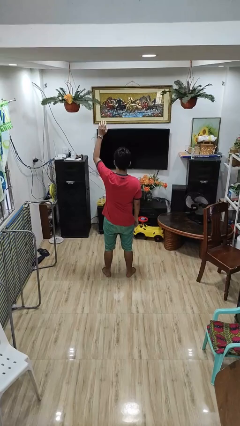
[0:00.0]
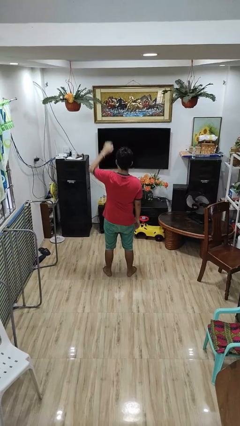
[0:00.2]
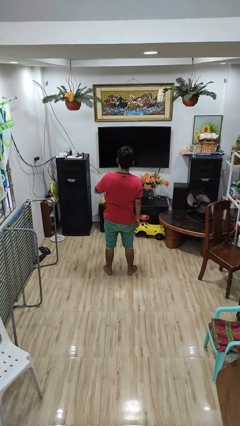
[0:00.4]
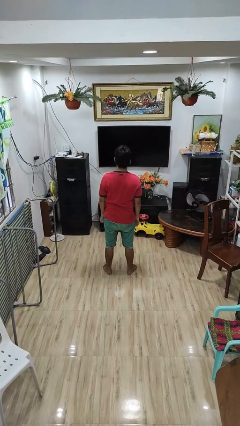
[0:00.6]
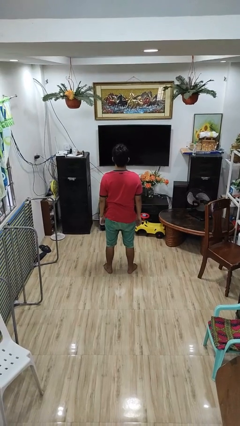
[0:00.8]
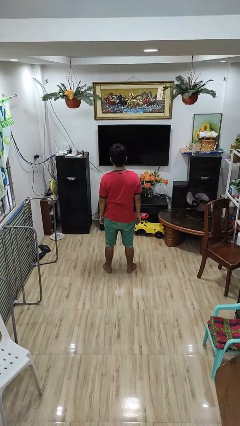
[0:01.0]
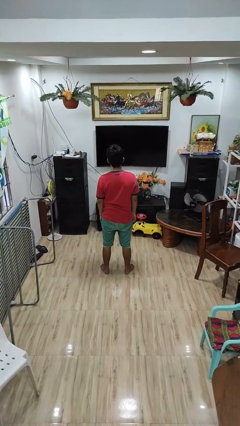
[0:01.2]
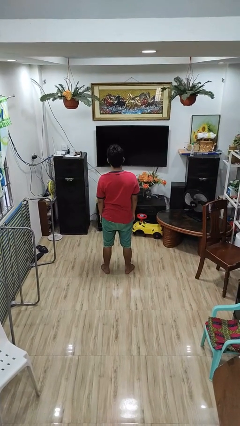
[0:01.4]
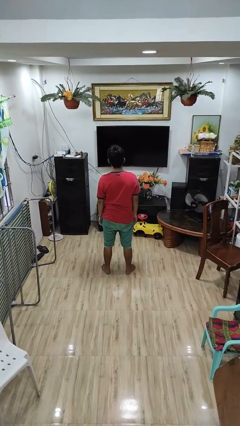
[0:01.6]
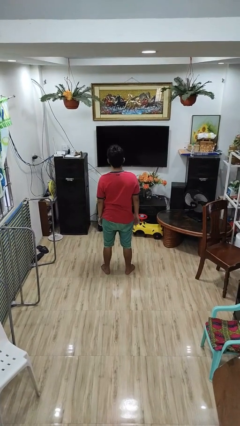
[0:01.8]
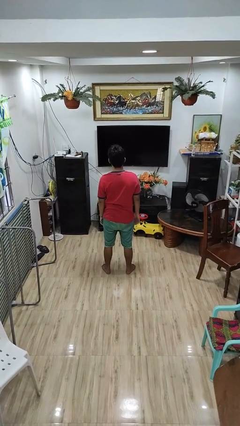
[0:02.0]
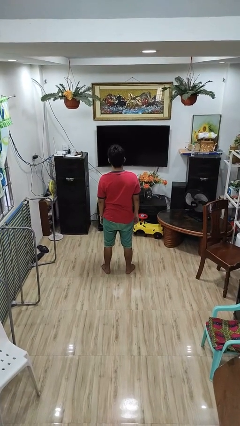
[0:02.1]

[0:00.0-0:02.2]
person gestures lower hand

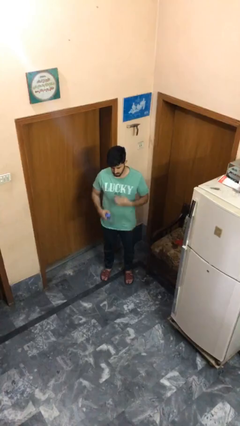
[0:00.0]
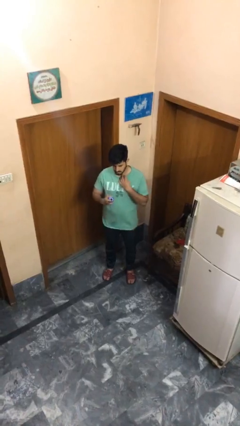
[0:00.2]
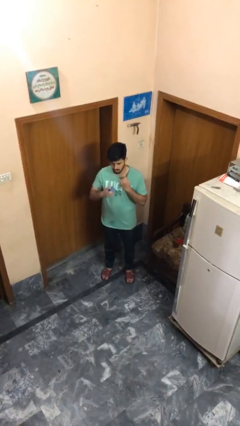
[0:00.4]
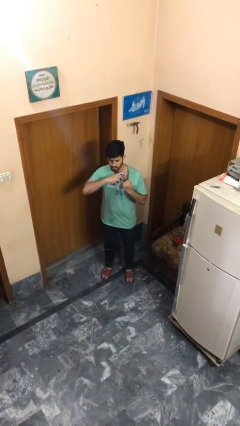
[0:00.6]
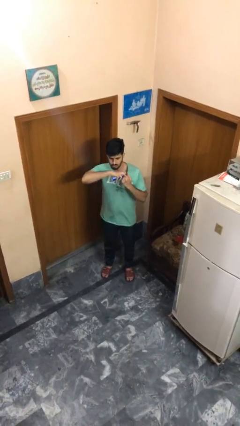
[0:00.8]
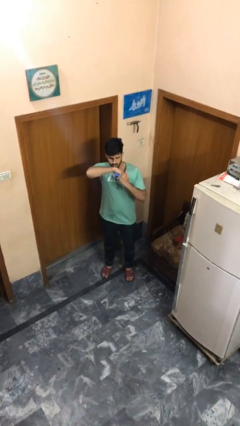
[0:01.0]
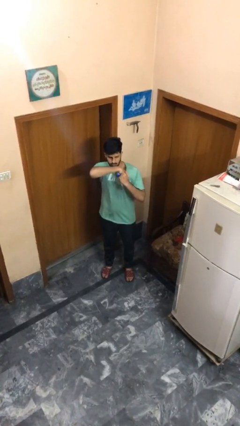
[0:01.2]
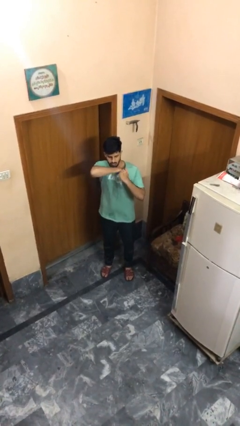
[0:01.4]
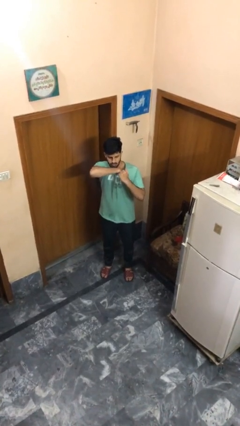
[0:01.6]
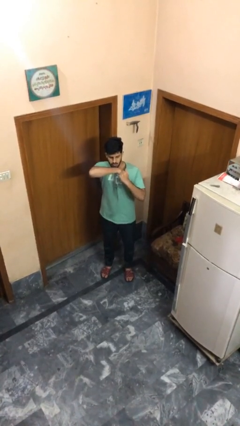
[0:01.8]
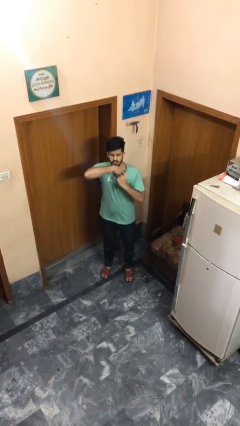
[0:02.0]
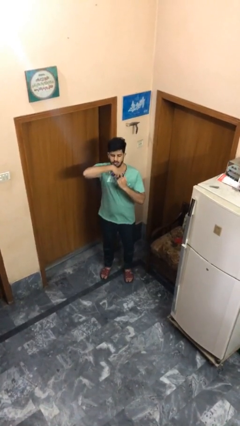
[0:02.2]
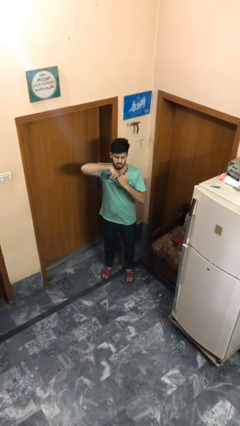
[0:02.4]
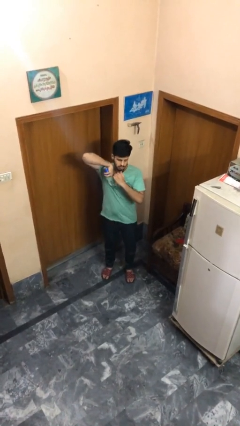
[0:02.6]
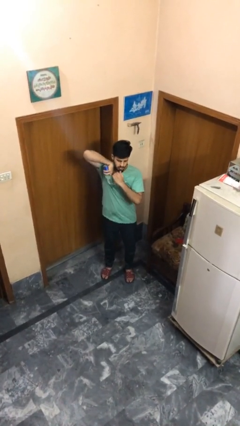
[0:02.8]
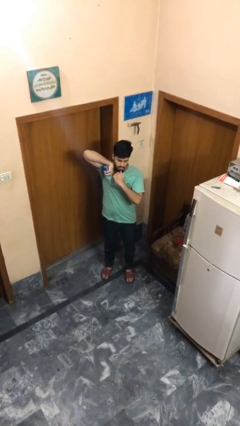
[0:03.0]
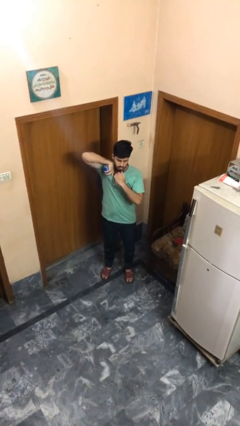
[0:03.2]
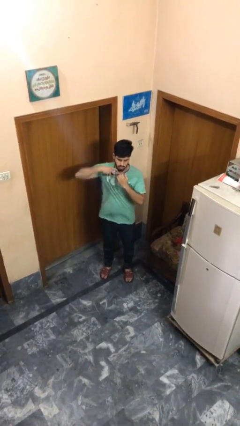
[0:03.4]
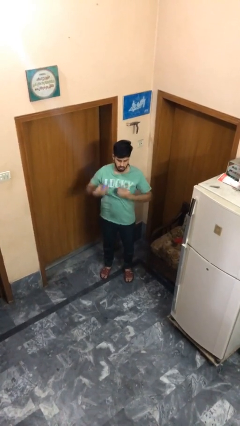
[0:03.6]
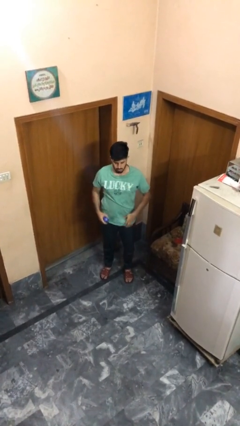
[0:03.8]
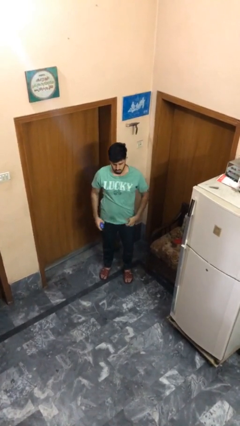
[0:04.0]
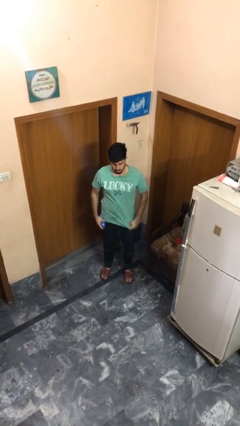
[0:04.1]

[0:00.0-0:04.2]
person applies deodorant

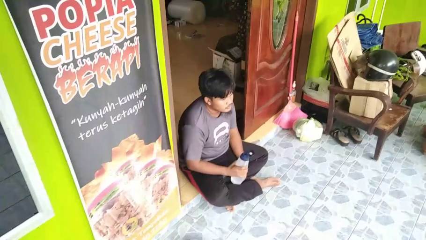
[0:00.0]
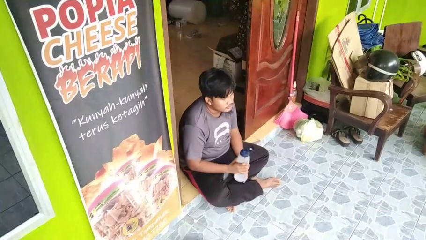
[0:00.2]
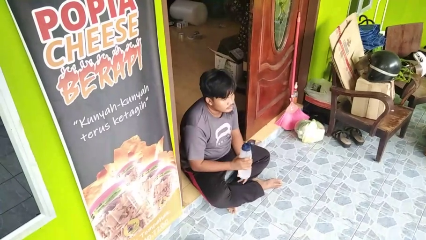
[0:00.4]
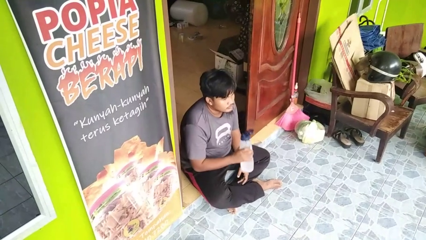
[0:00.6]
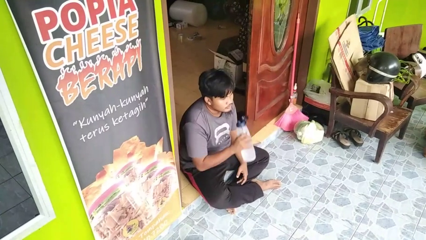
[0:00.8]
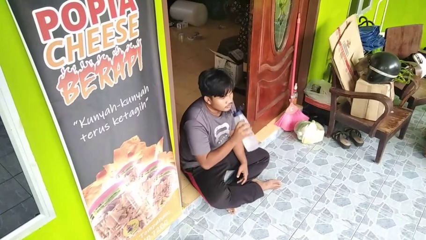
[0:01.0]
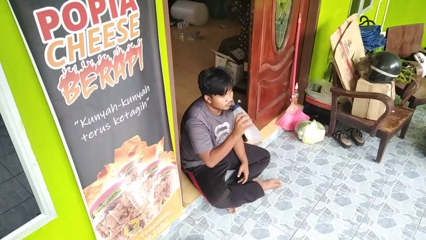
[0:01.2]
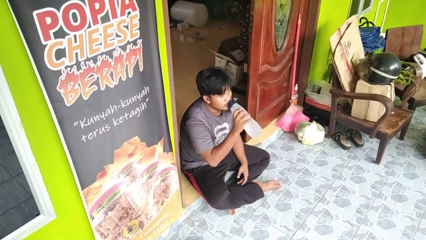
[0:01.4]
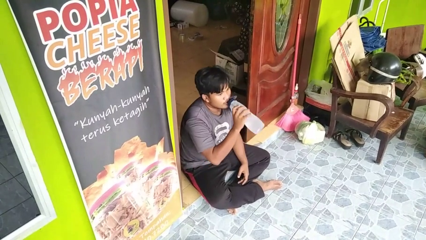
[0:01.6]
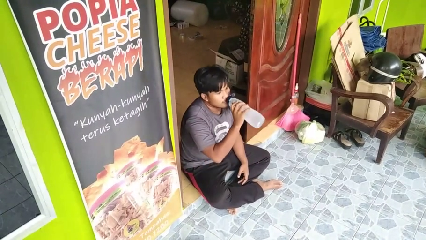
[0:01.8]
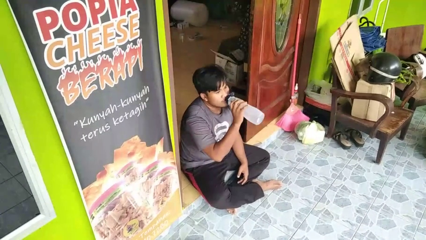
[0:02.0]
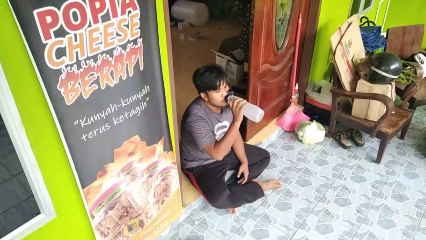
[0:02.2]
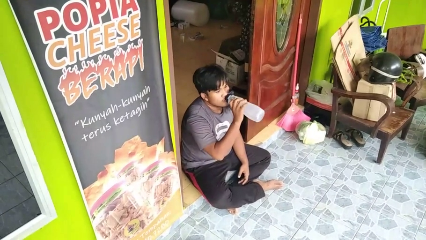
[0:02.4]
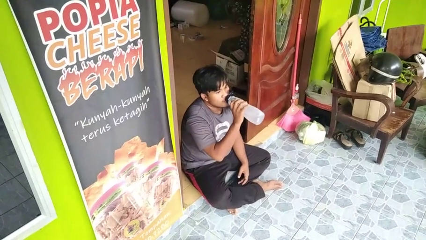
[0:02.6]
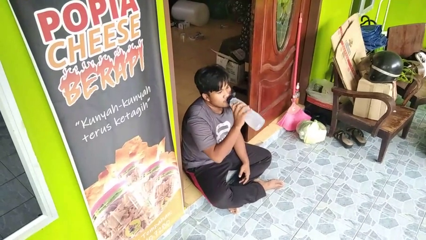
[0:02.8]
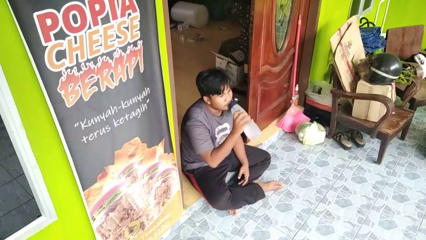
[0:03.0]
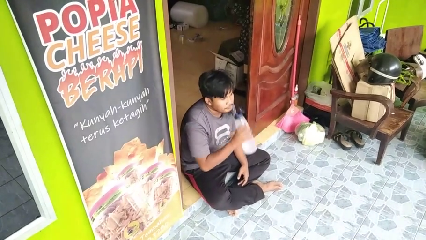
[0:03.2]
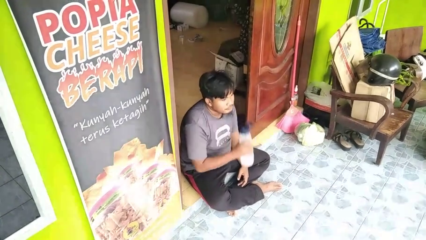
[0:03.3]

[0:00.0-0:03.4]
person drinks from bottle

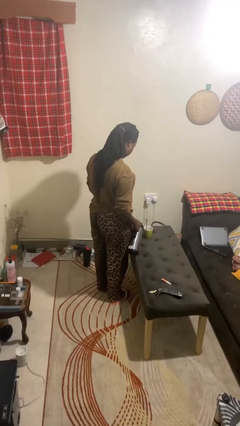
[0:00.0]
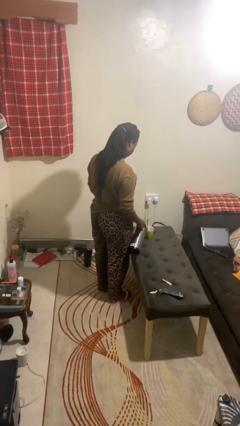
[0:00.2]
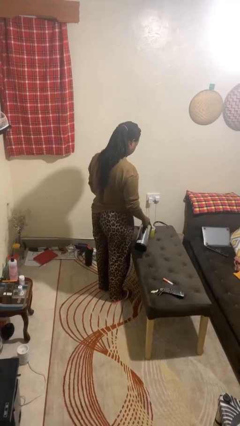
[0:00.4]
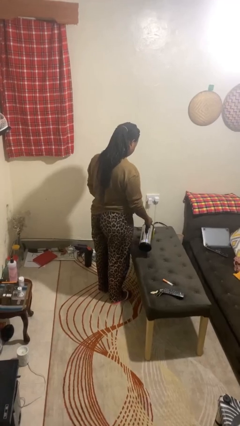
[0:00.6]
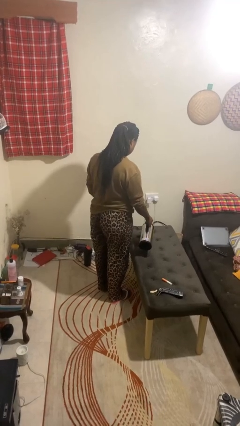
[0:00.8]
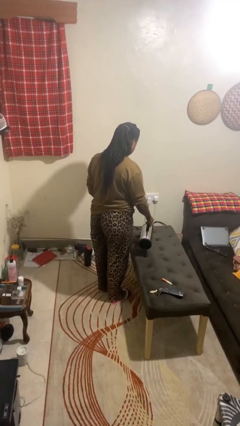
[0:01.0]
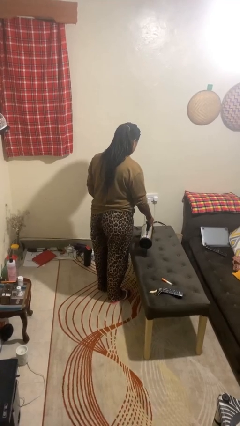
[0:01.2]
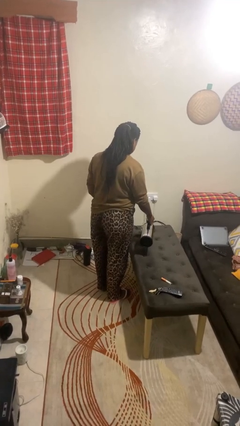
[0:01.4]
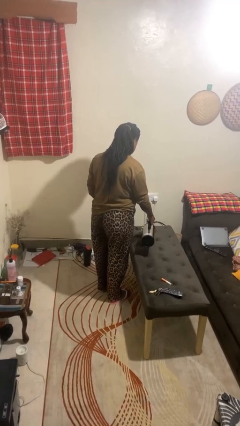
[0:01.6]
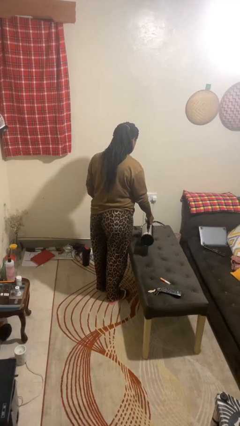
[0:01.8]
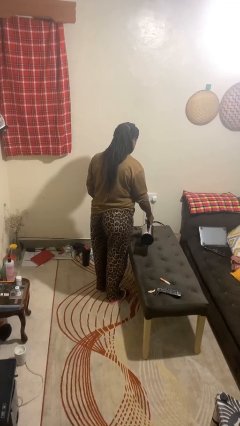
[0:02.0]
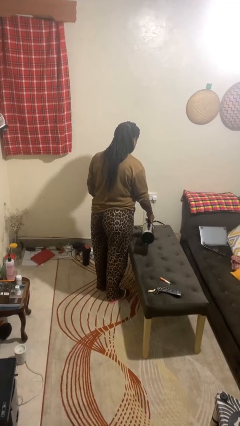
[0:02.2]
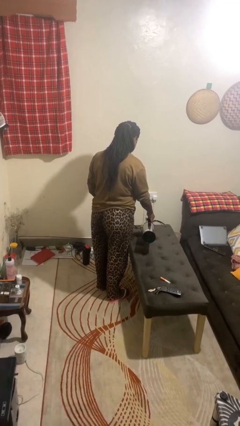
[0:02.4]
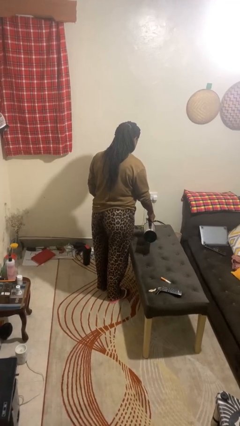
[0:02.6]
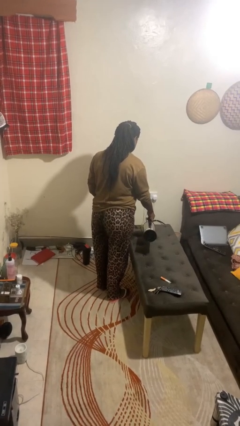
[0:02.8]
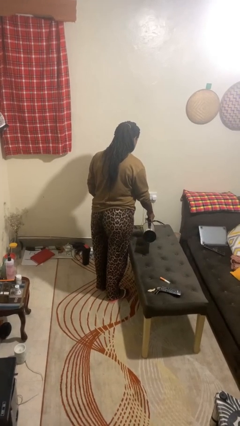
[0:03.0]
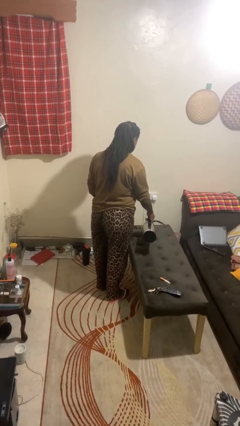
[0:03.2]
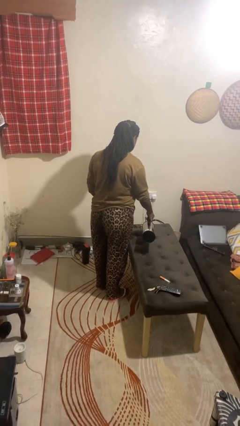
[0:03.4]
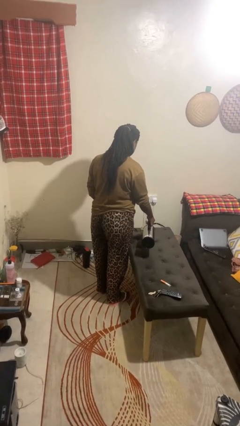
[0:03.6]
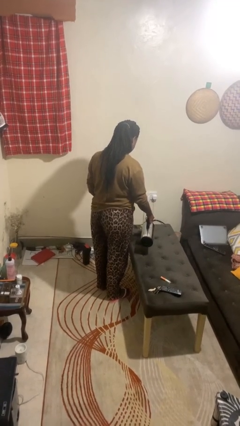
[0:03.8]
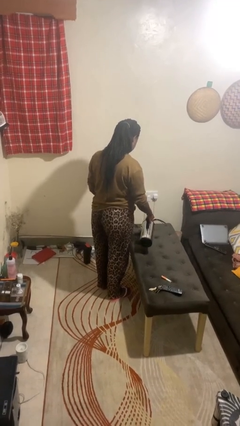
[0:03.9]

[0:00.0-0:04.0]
person pours coffee into mug

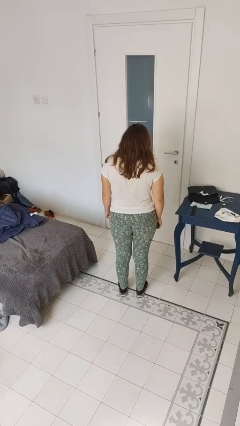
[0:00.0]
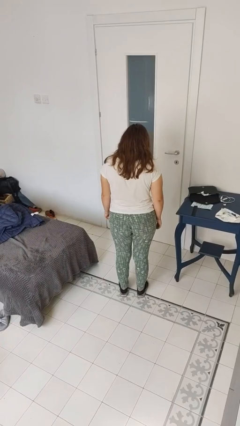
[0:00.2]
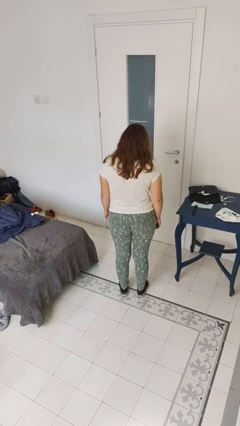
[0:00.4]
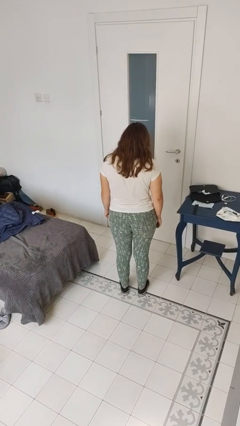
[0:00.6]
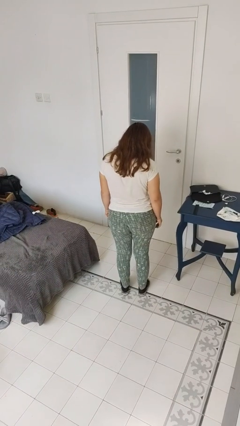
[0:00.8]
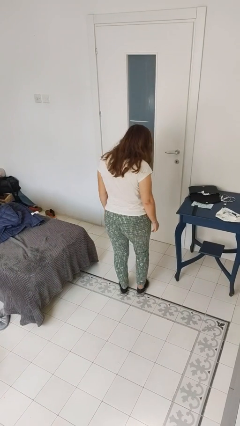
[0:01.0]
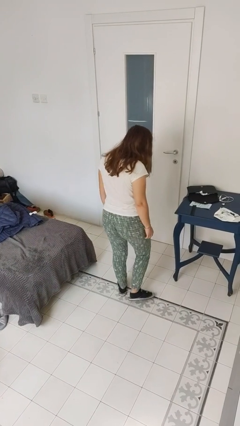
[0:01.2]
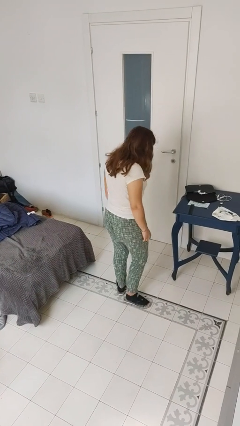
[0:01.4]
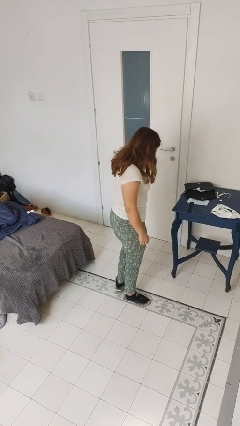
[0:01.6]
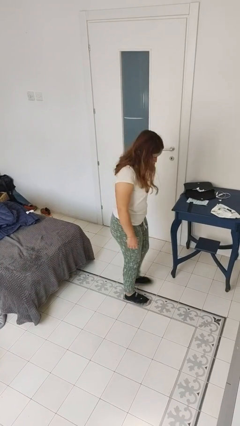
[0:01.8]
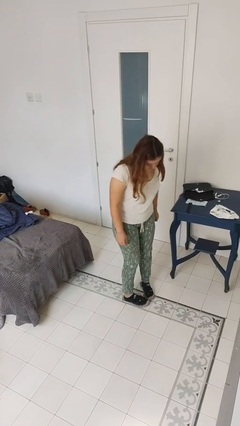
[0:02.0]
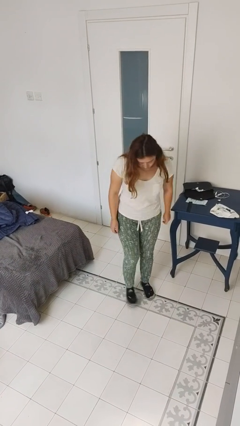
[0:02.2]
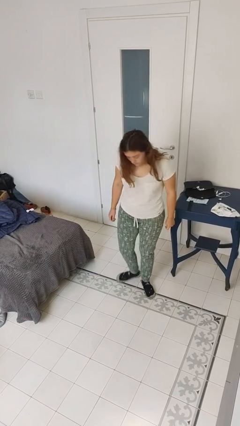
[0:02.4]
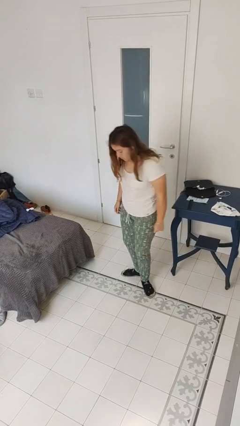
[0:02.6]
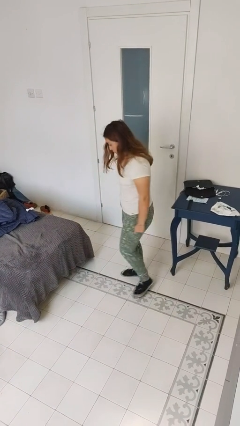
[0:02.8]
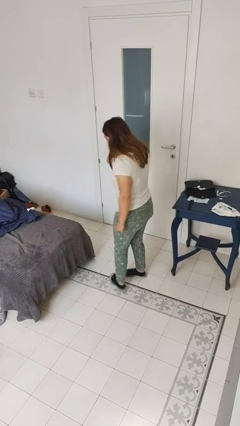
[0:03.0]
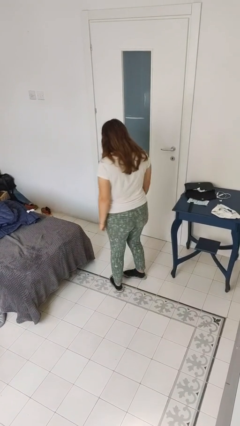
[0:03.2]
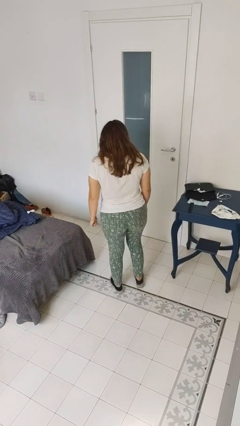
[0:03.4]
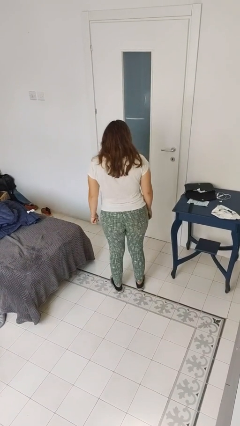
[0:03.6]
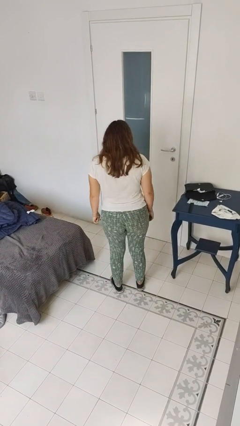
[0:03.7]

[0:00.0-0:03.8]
person twirls
